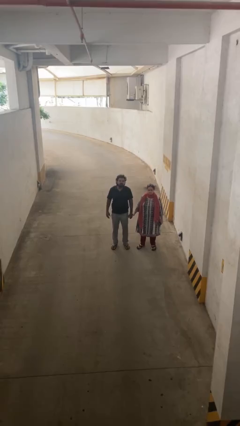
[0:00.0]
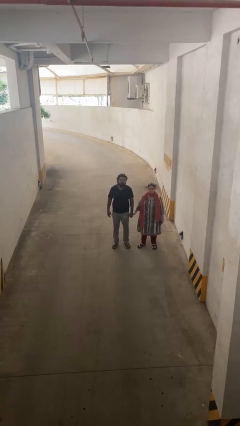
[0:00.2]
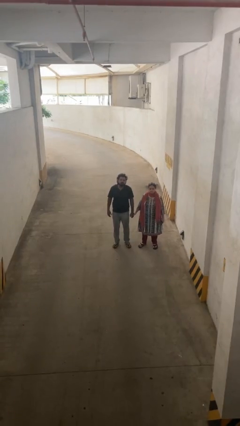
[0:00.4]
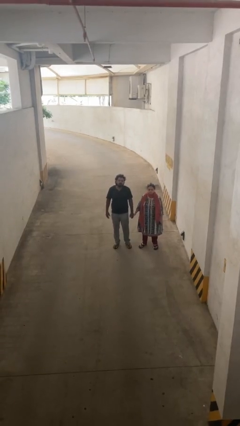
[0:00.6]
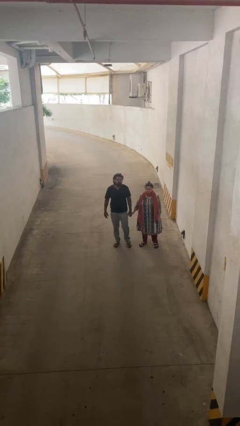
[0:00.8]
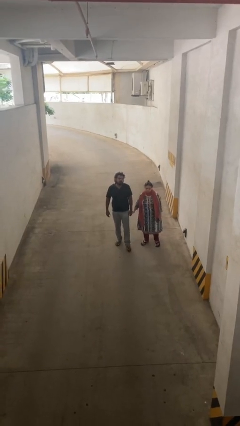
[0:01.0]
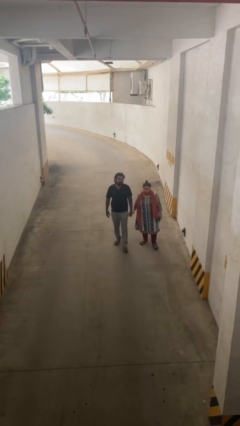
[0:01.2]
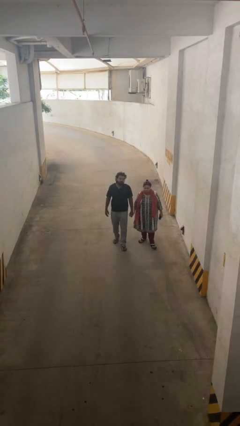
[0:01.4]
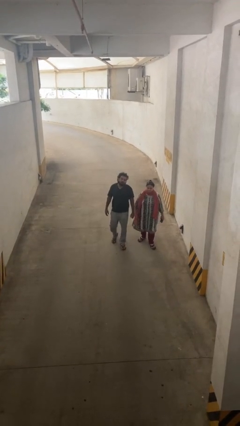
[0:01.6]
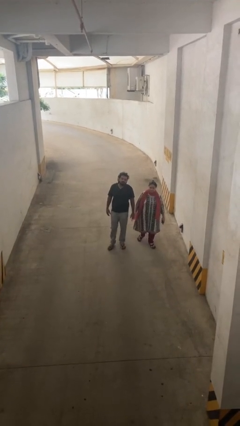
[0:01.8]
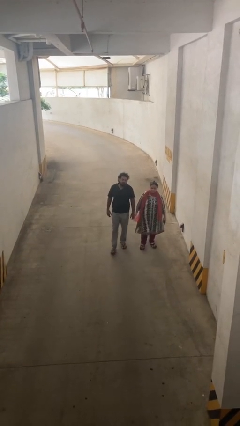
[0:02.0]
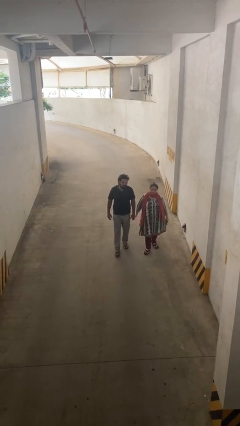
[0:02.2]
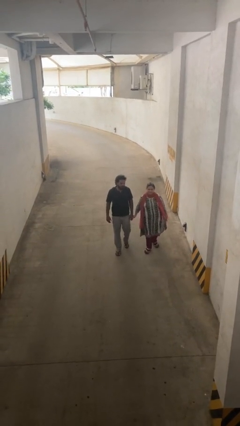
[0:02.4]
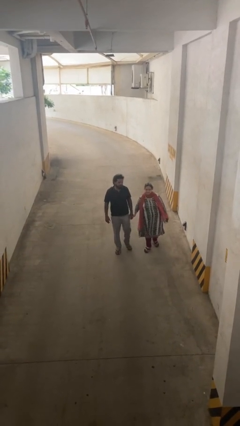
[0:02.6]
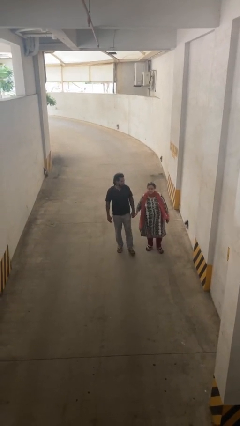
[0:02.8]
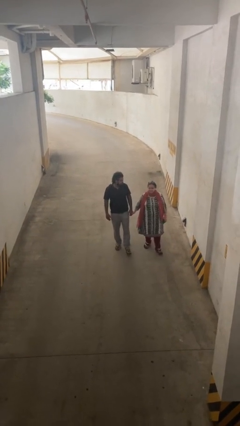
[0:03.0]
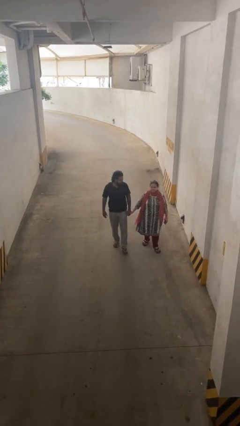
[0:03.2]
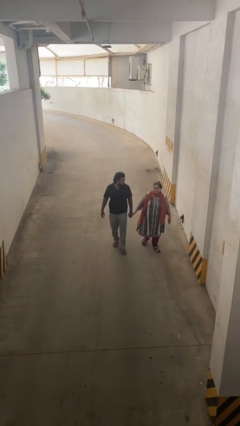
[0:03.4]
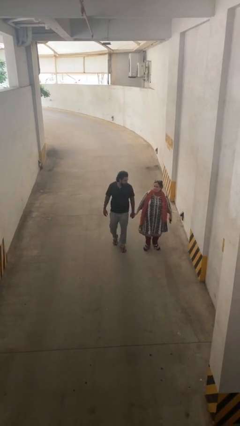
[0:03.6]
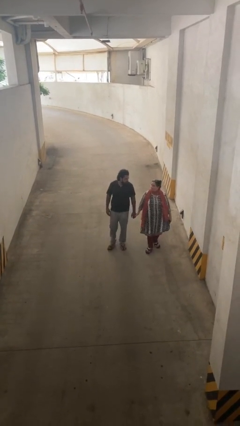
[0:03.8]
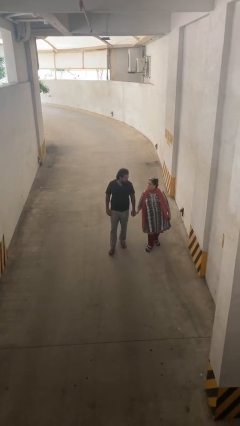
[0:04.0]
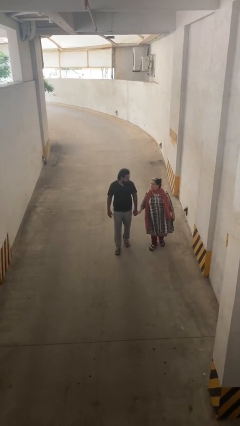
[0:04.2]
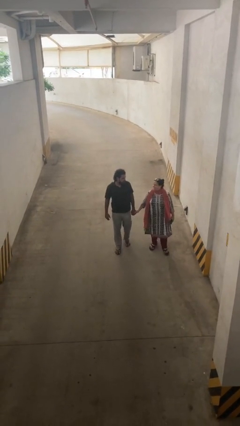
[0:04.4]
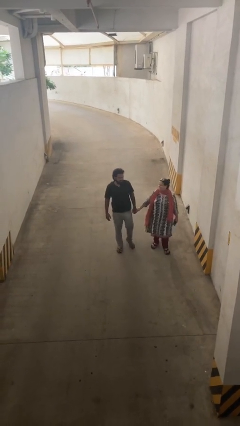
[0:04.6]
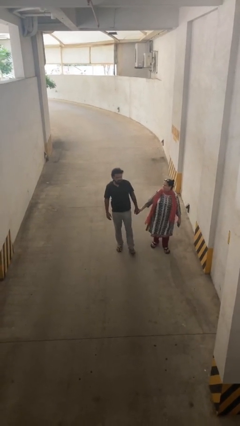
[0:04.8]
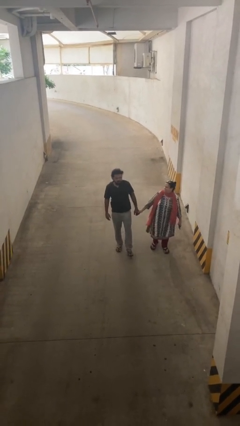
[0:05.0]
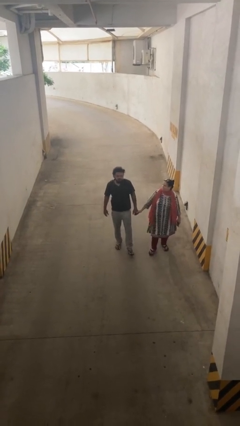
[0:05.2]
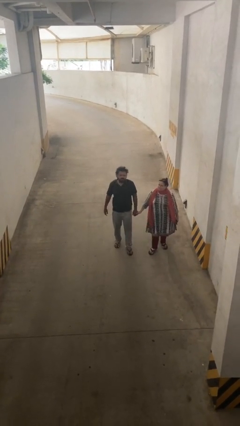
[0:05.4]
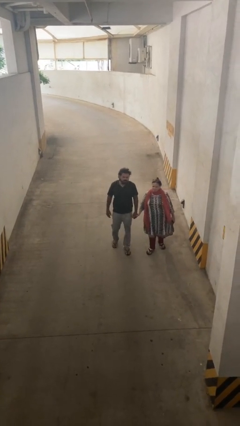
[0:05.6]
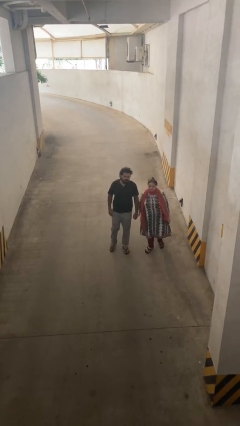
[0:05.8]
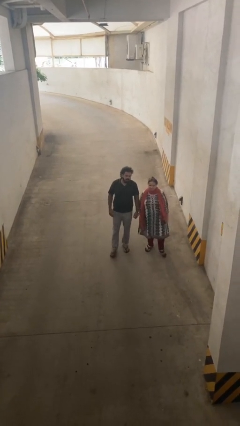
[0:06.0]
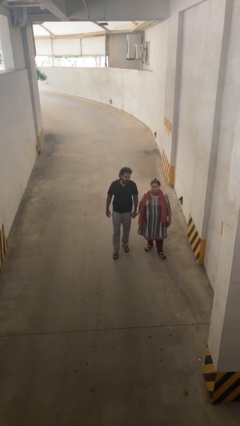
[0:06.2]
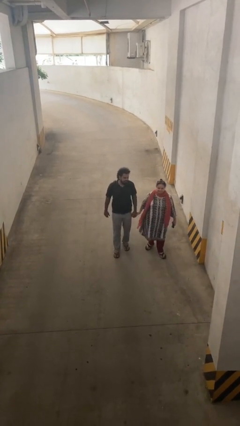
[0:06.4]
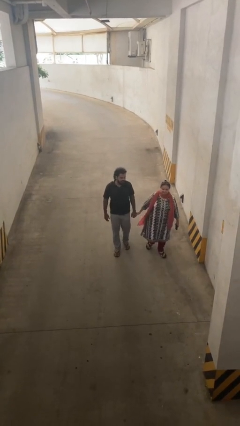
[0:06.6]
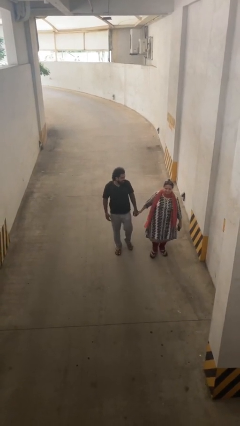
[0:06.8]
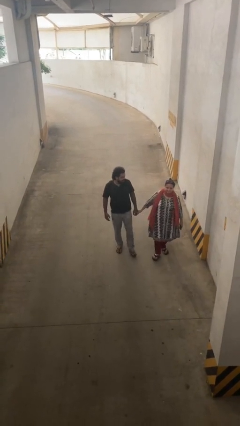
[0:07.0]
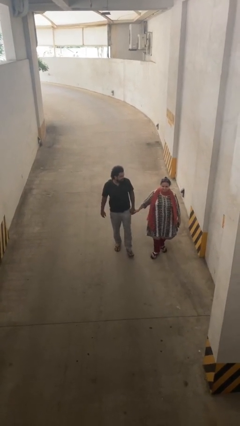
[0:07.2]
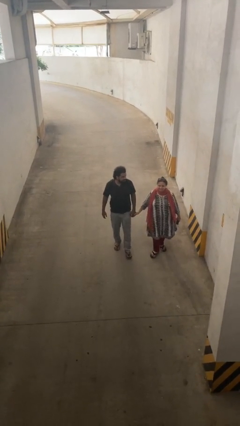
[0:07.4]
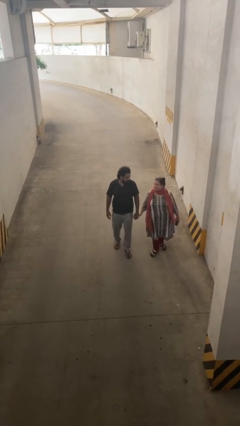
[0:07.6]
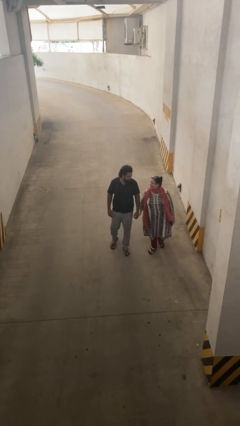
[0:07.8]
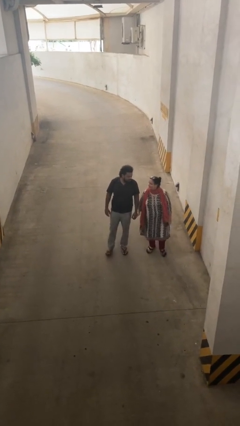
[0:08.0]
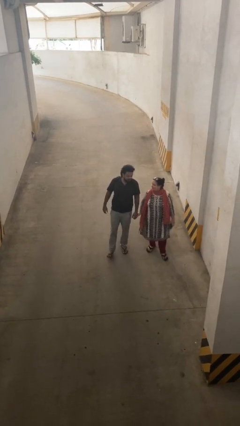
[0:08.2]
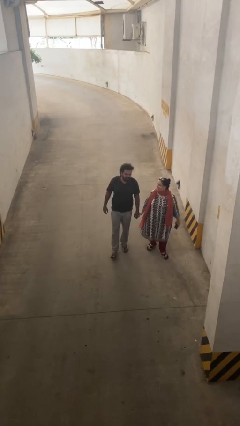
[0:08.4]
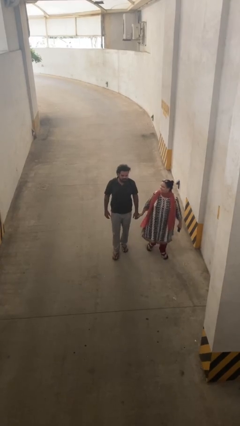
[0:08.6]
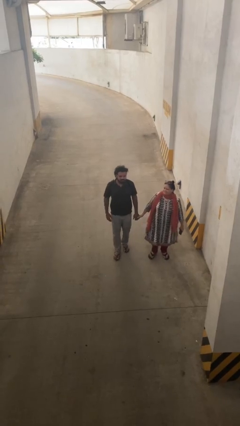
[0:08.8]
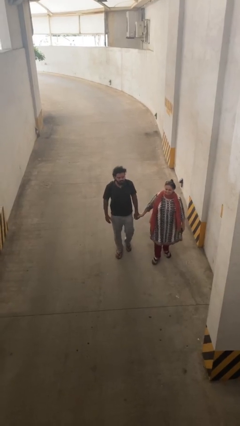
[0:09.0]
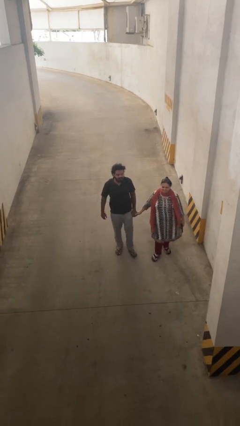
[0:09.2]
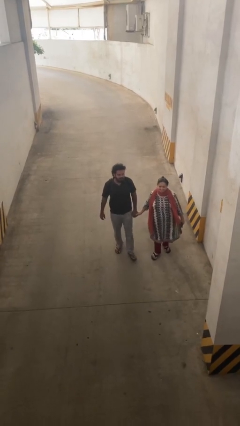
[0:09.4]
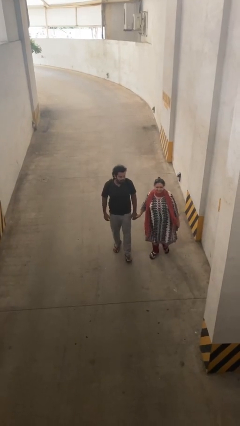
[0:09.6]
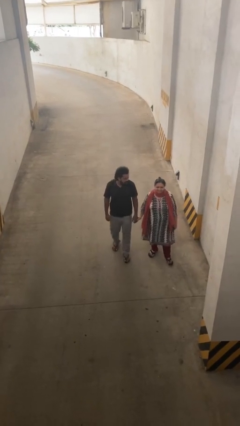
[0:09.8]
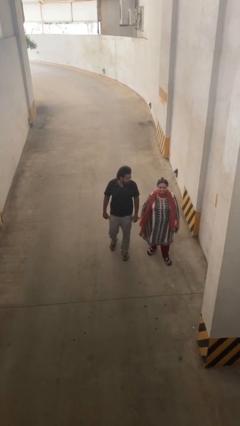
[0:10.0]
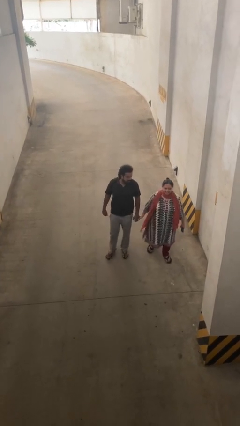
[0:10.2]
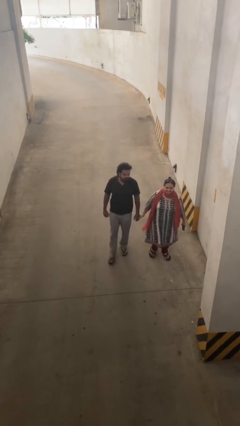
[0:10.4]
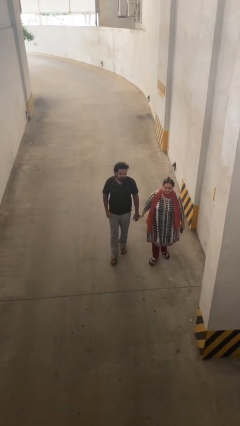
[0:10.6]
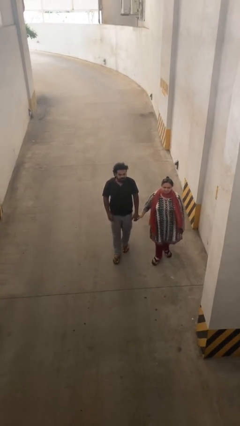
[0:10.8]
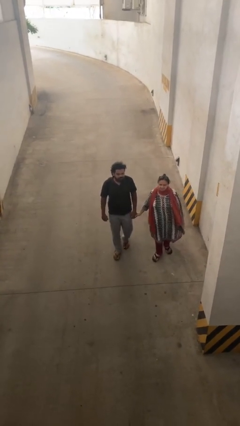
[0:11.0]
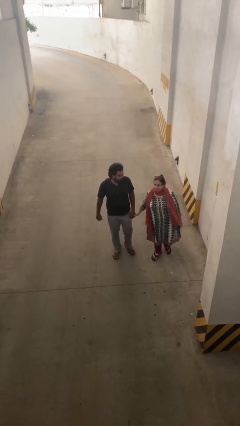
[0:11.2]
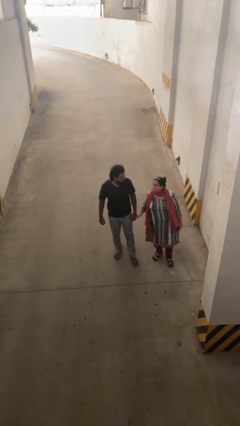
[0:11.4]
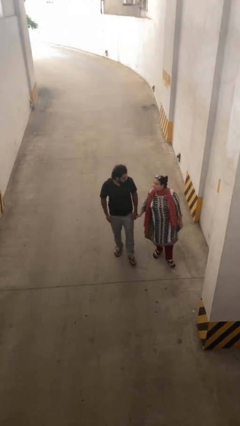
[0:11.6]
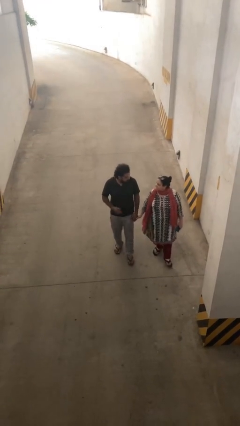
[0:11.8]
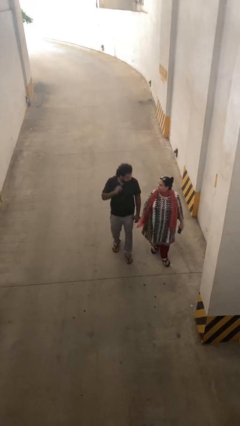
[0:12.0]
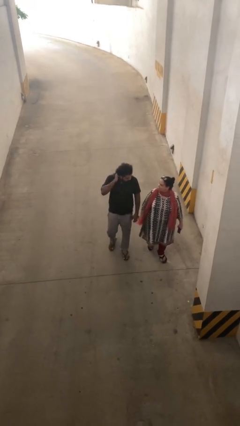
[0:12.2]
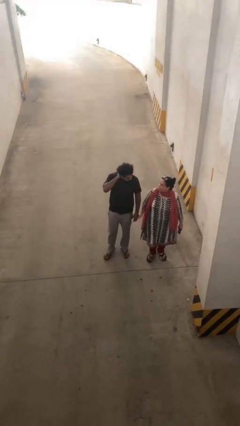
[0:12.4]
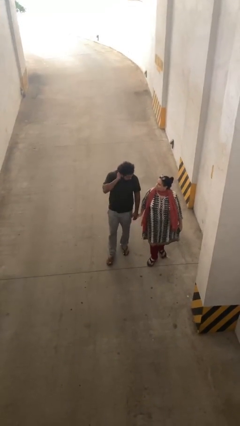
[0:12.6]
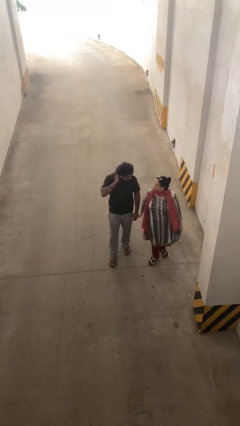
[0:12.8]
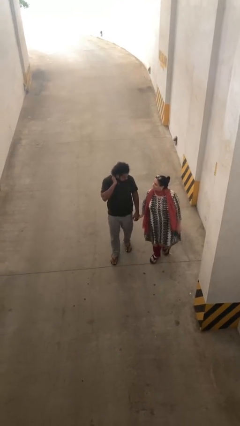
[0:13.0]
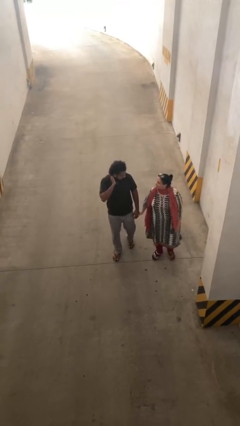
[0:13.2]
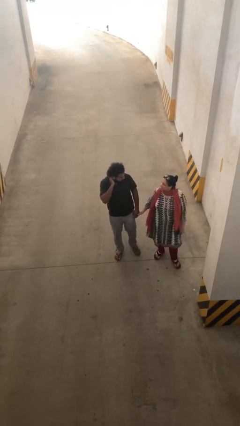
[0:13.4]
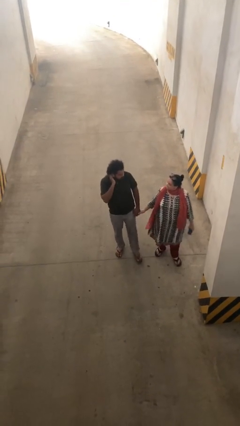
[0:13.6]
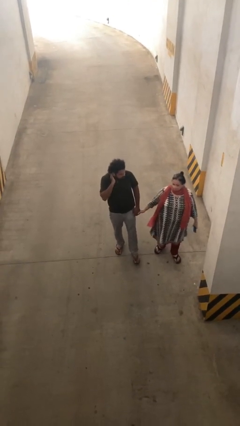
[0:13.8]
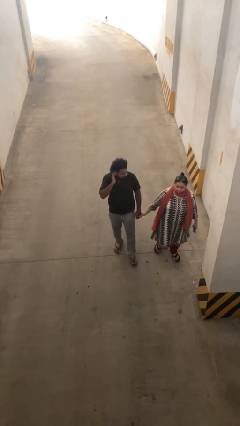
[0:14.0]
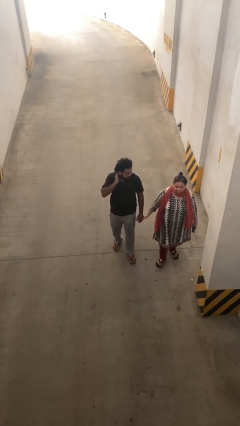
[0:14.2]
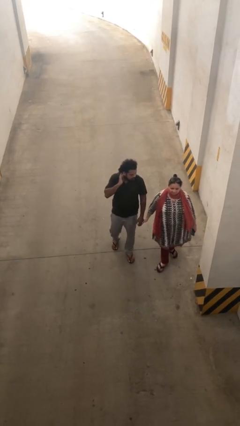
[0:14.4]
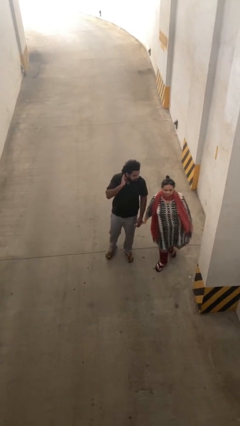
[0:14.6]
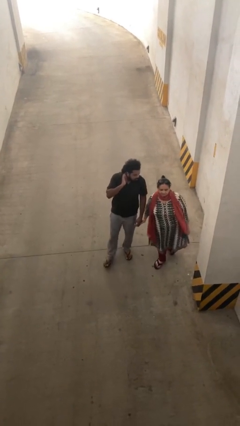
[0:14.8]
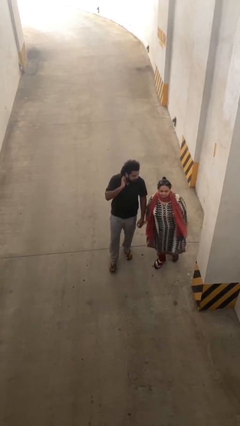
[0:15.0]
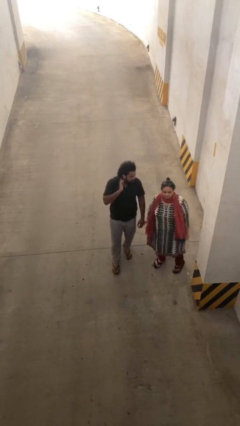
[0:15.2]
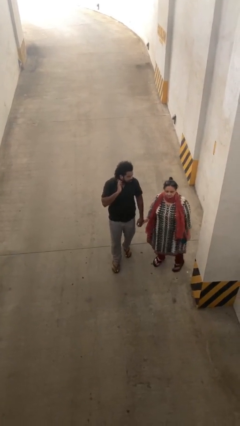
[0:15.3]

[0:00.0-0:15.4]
person holds hand

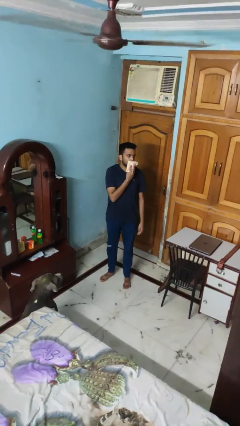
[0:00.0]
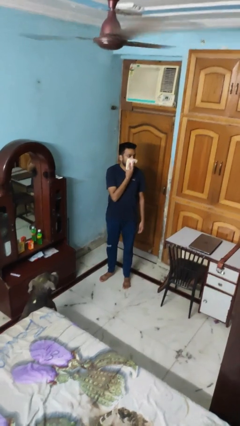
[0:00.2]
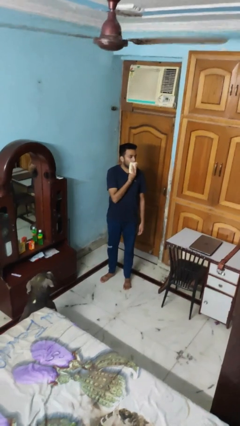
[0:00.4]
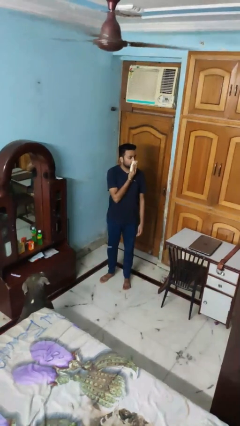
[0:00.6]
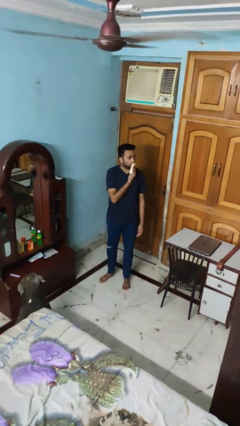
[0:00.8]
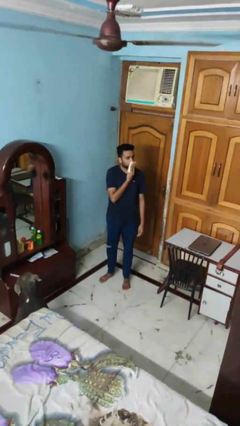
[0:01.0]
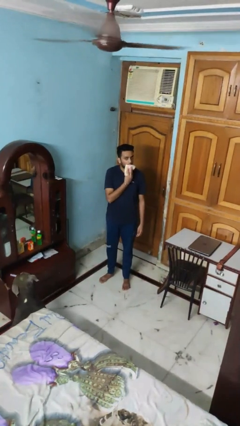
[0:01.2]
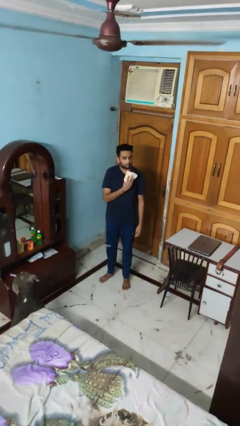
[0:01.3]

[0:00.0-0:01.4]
person wipes mouth with napkin

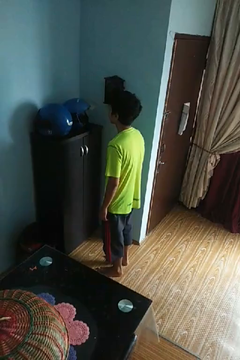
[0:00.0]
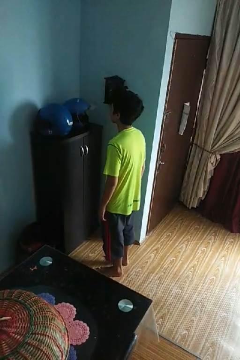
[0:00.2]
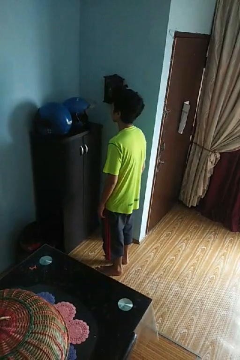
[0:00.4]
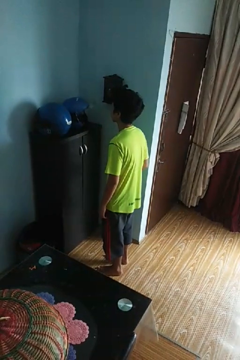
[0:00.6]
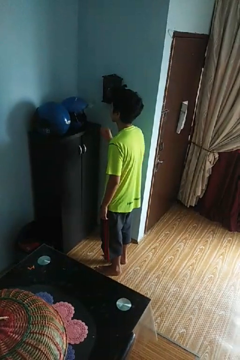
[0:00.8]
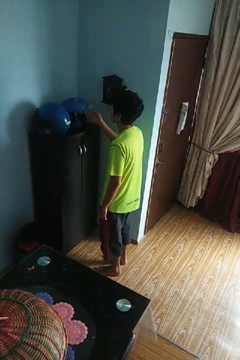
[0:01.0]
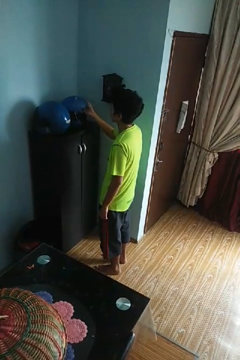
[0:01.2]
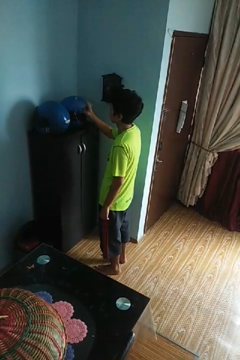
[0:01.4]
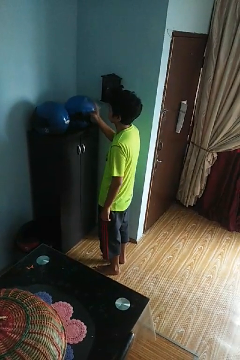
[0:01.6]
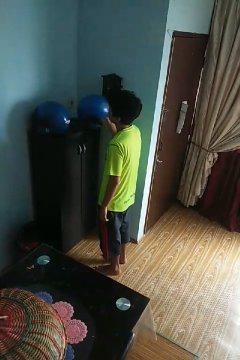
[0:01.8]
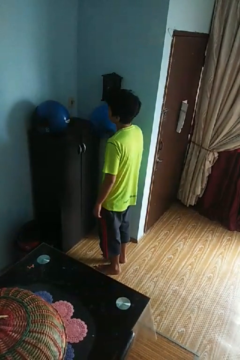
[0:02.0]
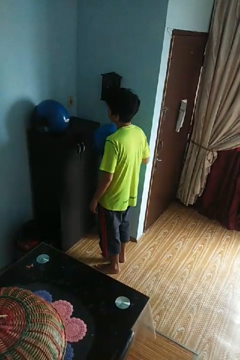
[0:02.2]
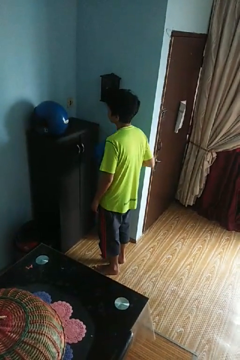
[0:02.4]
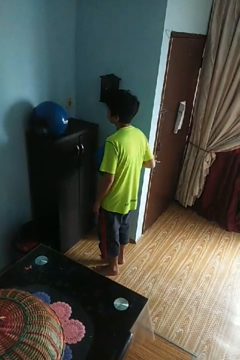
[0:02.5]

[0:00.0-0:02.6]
person picks up object from countertop
